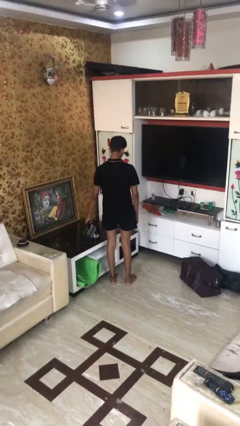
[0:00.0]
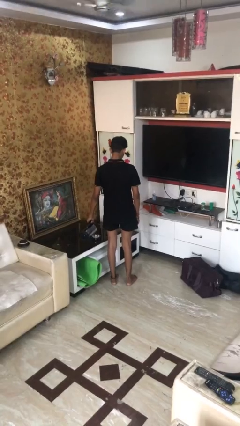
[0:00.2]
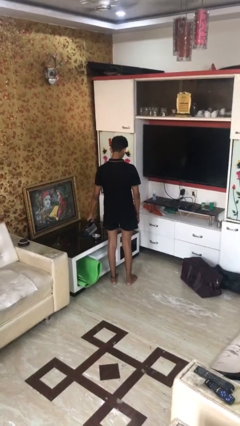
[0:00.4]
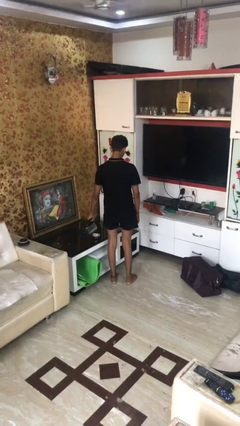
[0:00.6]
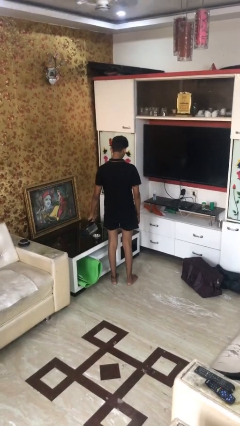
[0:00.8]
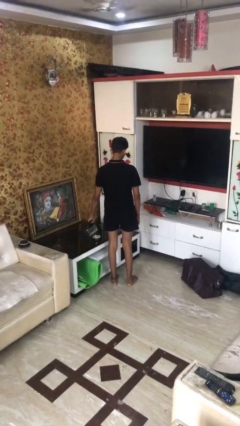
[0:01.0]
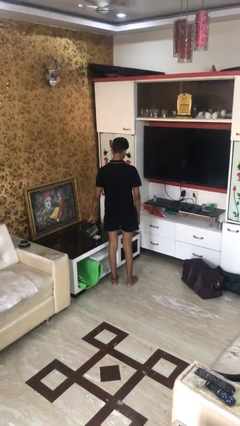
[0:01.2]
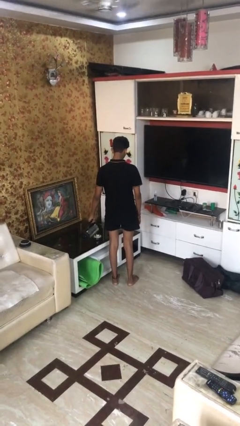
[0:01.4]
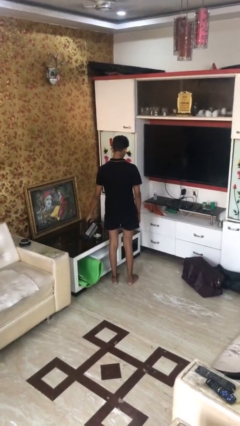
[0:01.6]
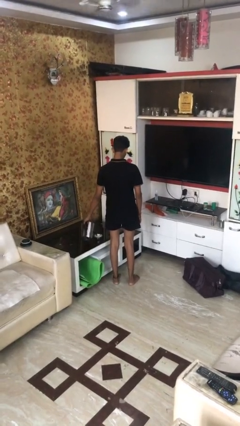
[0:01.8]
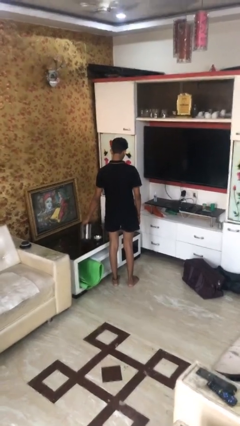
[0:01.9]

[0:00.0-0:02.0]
person pours into bowl

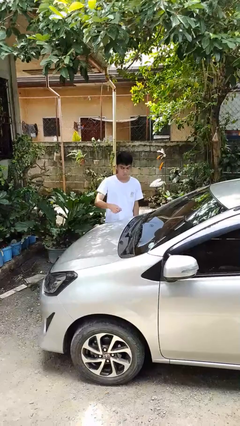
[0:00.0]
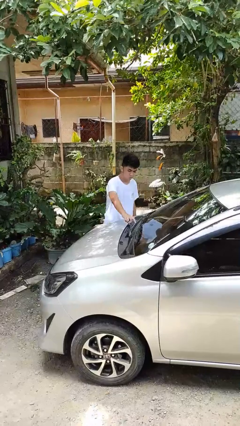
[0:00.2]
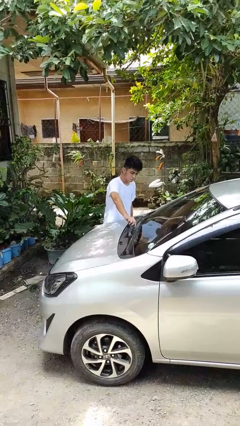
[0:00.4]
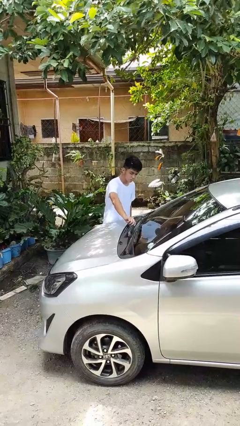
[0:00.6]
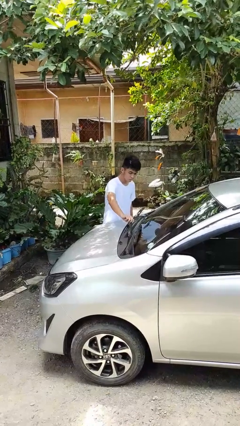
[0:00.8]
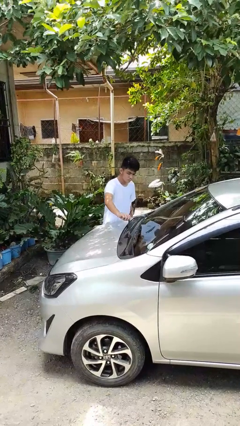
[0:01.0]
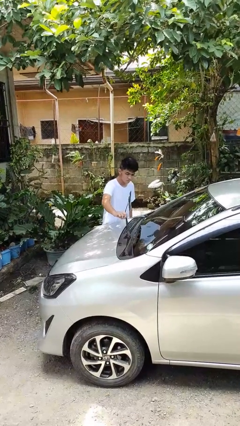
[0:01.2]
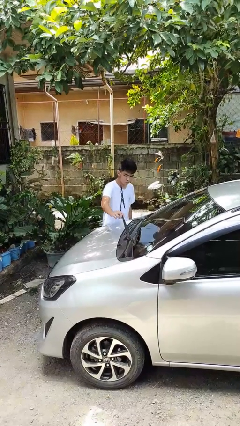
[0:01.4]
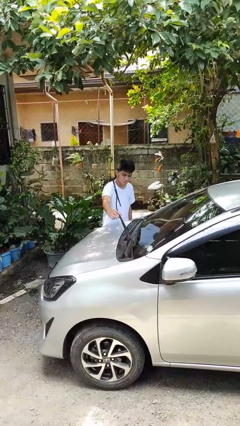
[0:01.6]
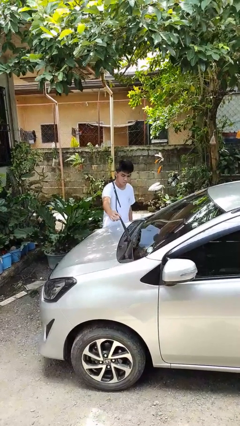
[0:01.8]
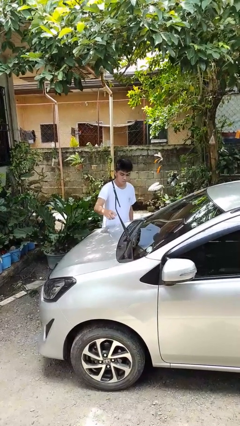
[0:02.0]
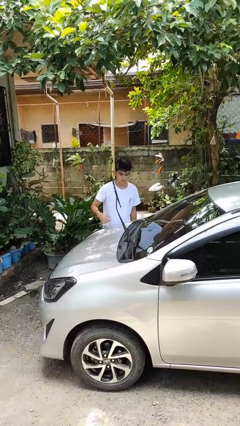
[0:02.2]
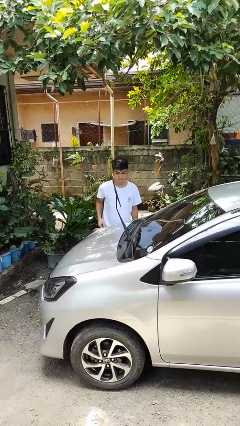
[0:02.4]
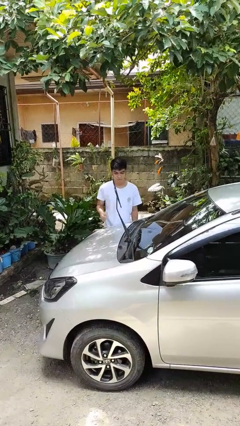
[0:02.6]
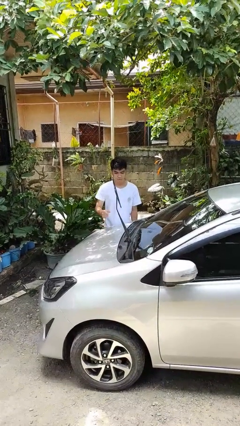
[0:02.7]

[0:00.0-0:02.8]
person flips up car wipers

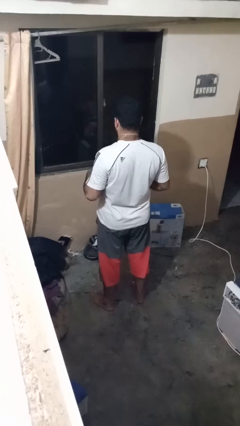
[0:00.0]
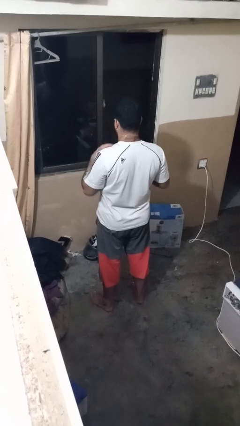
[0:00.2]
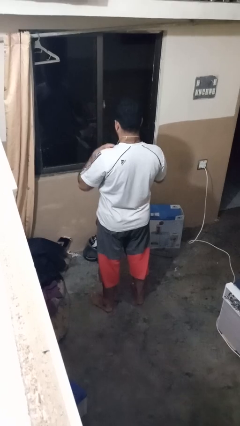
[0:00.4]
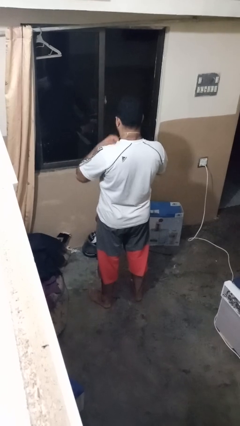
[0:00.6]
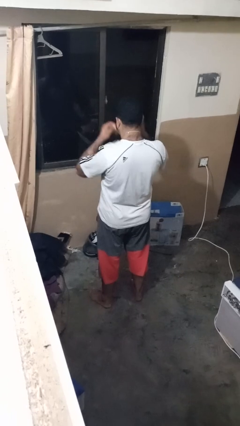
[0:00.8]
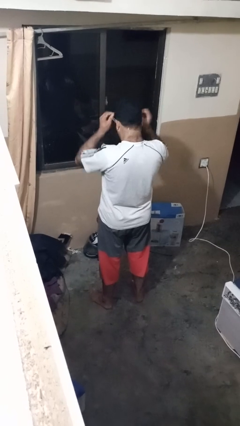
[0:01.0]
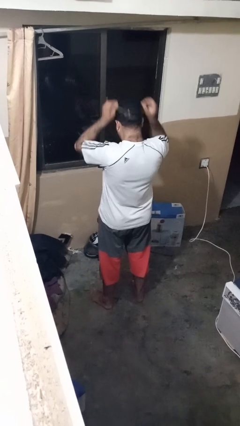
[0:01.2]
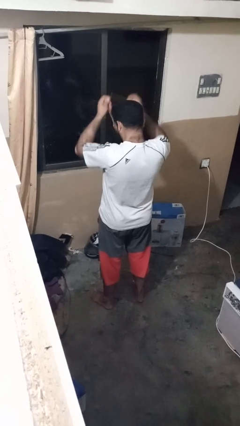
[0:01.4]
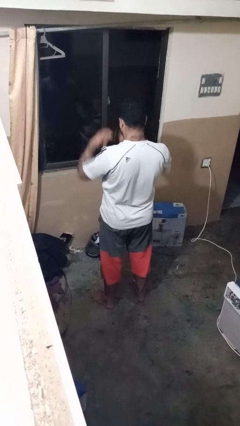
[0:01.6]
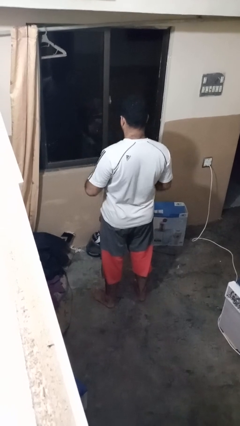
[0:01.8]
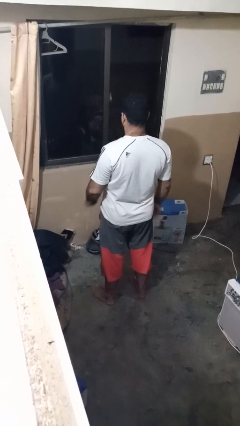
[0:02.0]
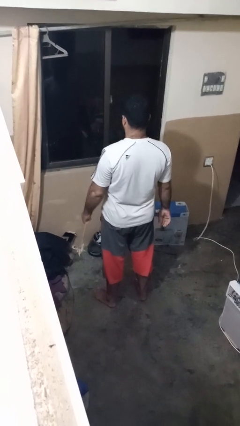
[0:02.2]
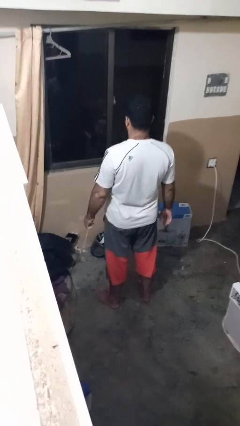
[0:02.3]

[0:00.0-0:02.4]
person takes off necklace

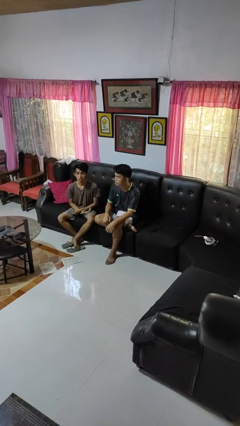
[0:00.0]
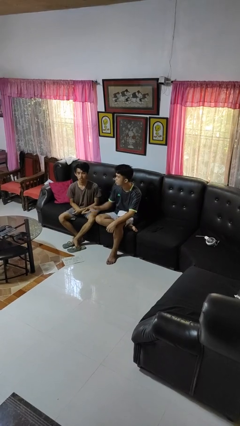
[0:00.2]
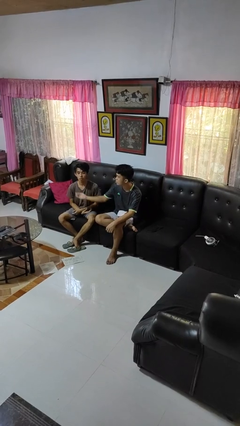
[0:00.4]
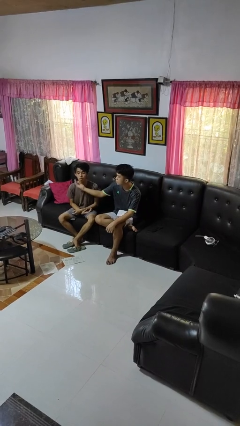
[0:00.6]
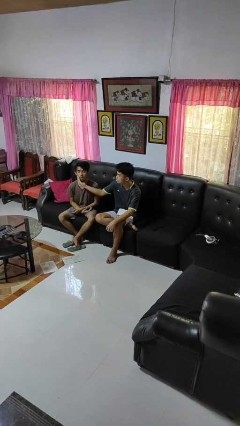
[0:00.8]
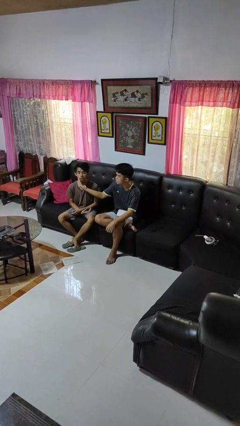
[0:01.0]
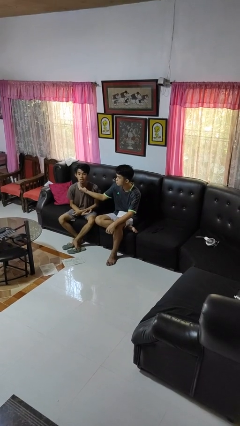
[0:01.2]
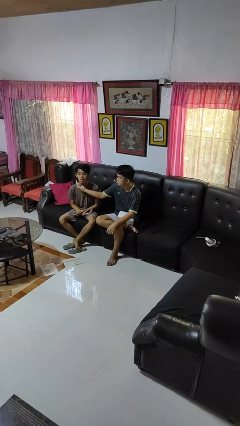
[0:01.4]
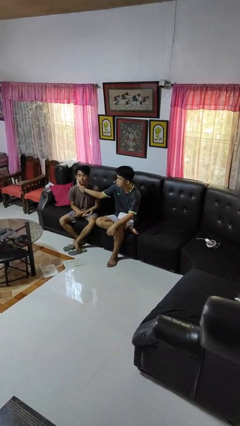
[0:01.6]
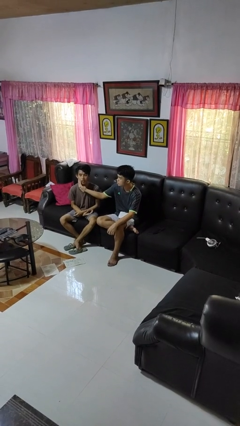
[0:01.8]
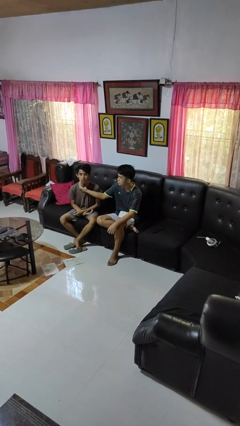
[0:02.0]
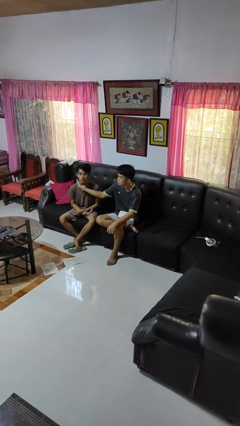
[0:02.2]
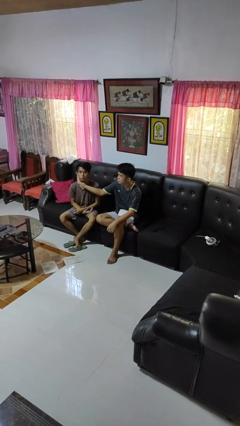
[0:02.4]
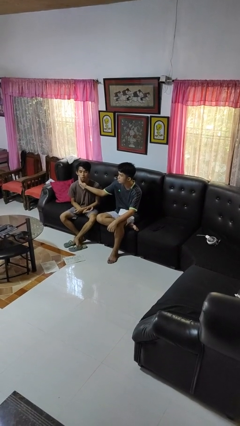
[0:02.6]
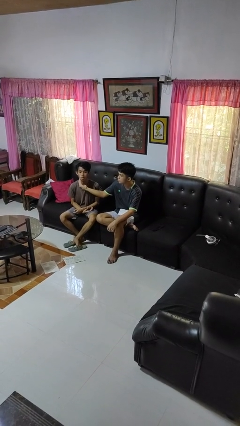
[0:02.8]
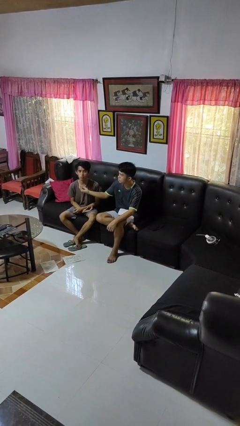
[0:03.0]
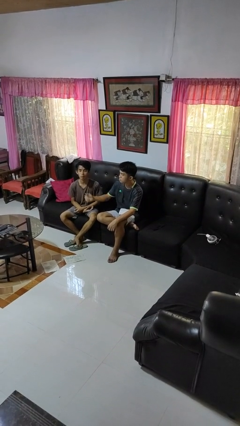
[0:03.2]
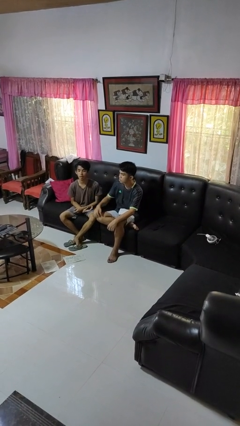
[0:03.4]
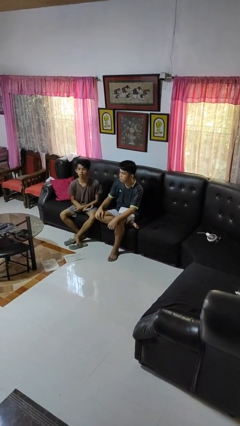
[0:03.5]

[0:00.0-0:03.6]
person touches face of person

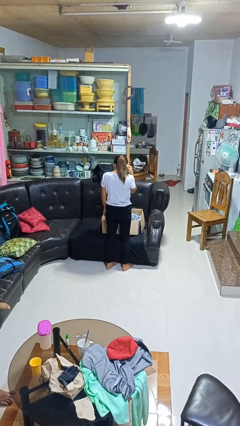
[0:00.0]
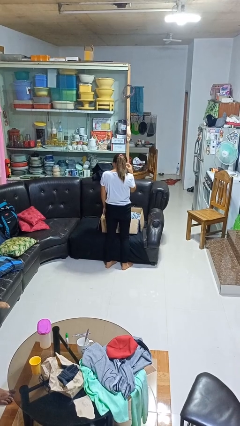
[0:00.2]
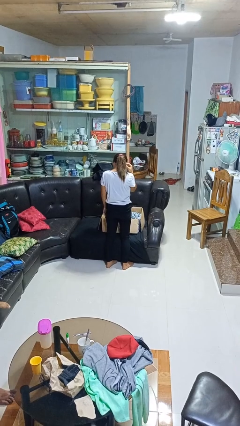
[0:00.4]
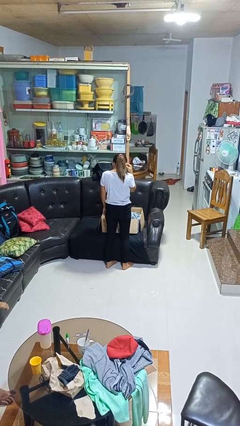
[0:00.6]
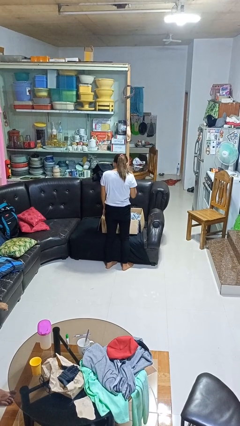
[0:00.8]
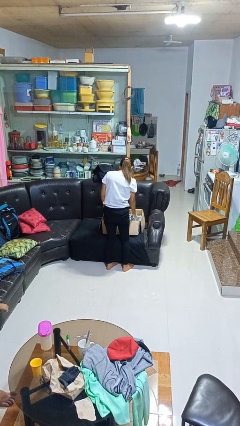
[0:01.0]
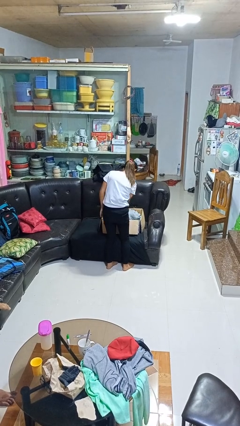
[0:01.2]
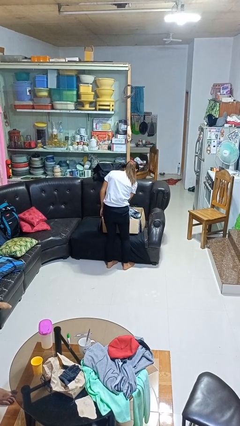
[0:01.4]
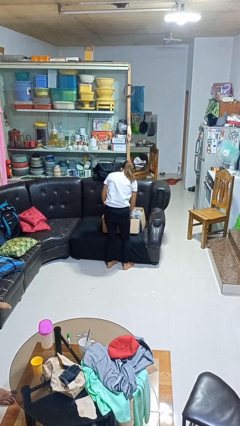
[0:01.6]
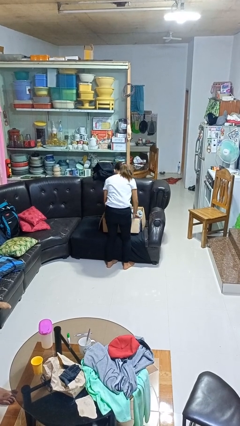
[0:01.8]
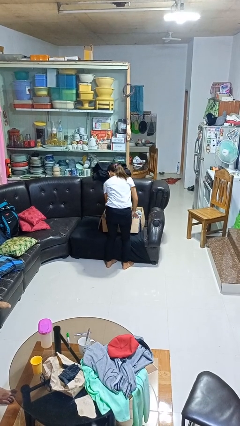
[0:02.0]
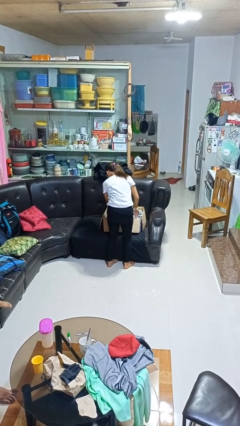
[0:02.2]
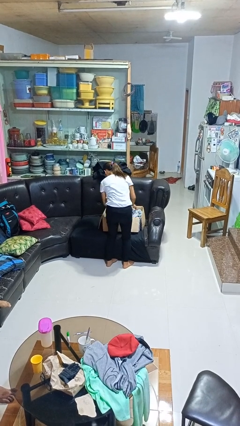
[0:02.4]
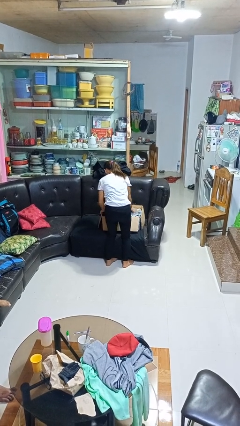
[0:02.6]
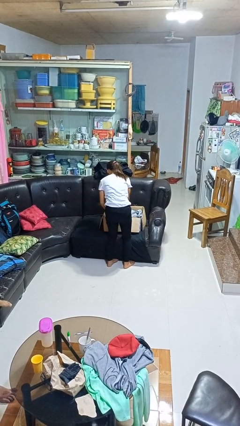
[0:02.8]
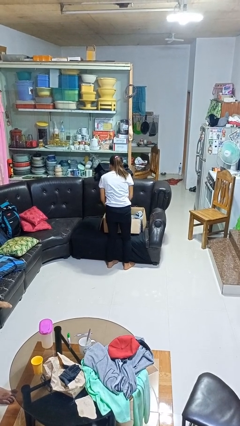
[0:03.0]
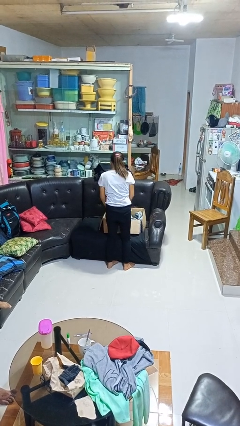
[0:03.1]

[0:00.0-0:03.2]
person searches in box

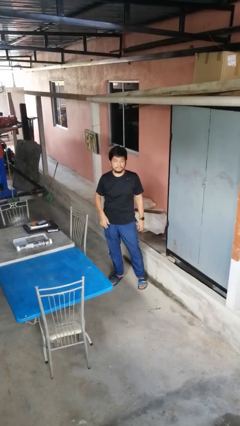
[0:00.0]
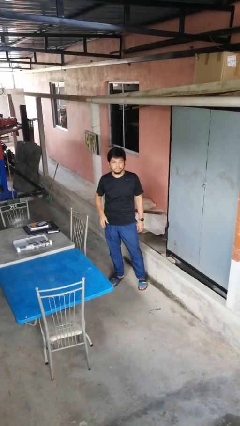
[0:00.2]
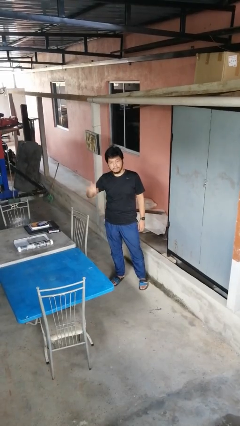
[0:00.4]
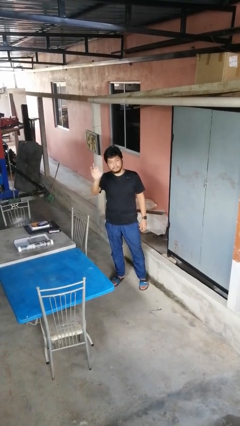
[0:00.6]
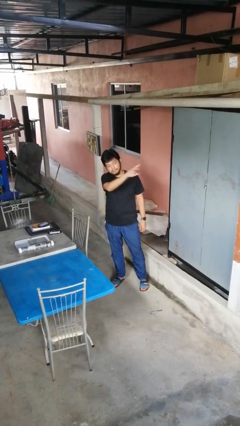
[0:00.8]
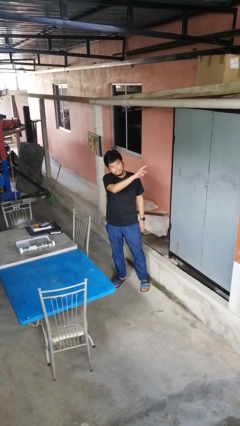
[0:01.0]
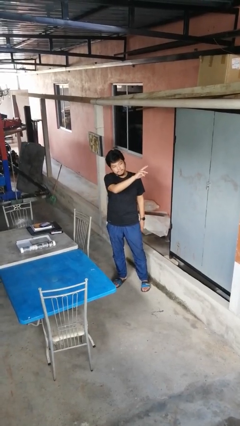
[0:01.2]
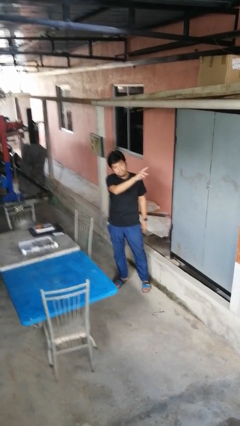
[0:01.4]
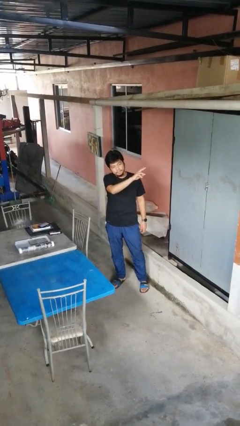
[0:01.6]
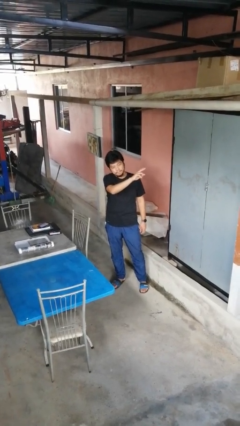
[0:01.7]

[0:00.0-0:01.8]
person gestures swipe left

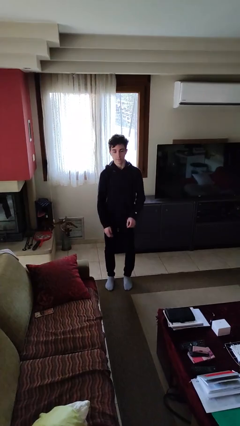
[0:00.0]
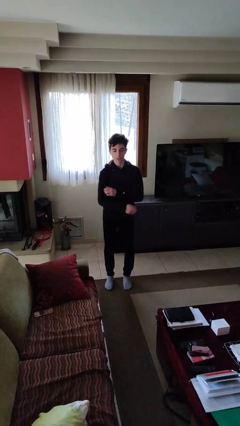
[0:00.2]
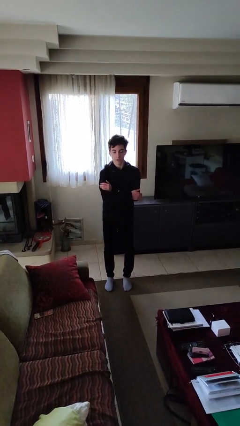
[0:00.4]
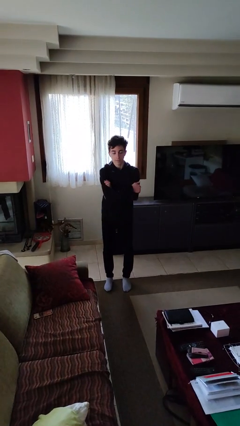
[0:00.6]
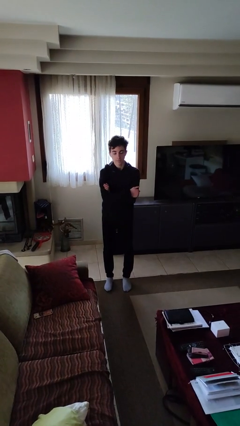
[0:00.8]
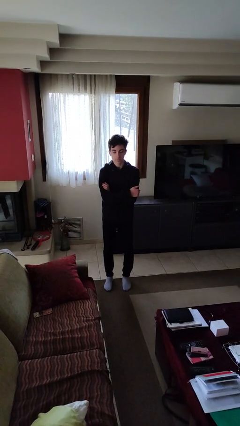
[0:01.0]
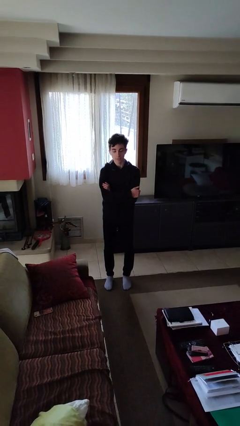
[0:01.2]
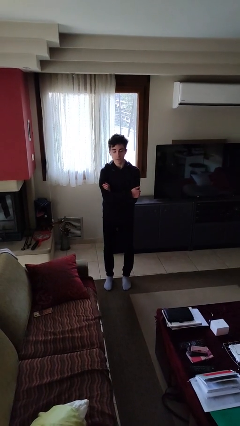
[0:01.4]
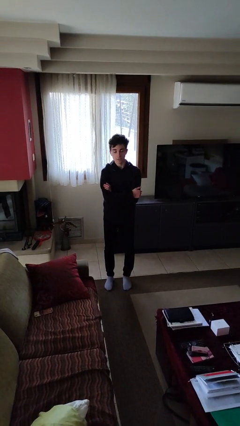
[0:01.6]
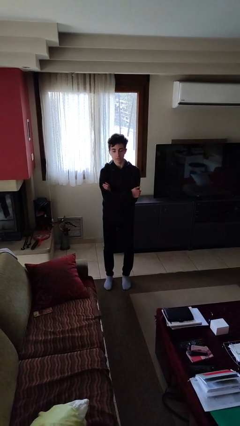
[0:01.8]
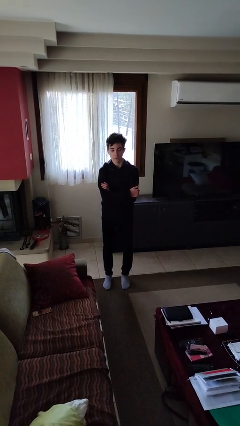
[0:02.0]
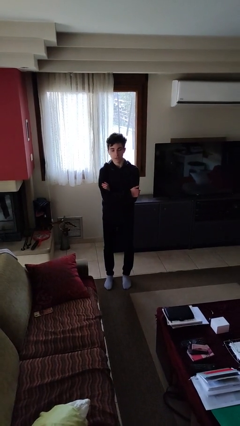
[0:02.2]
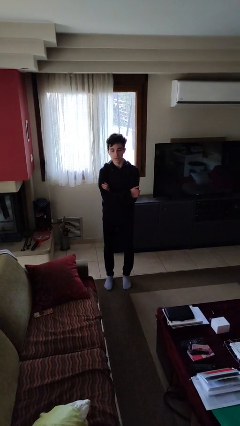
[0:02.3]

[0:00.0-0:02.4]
person crosses arms
